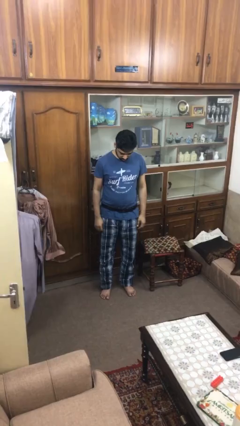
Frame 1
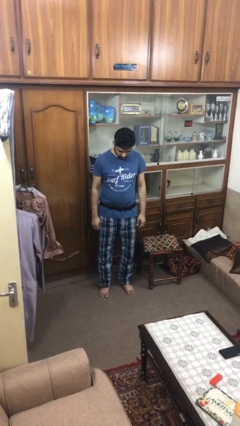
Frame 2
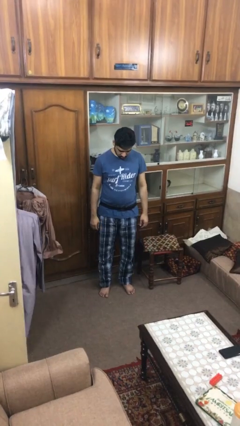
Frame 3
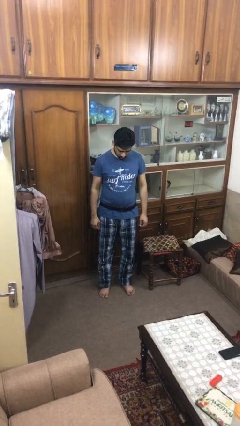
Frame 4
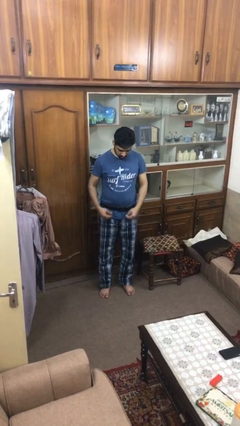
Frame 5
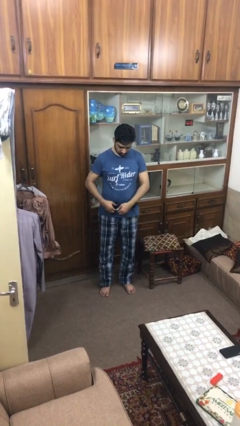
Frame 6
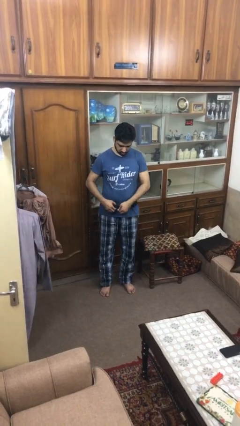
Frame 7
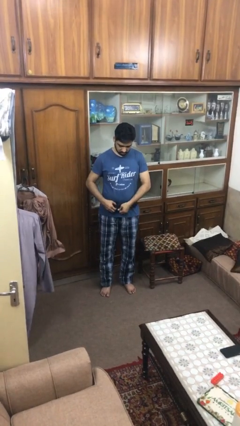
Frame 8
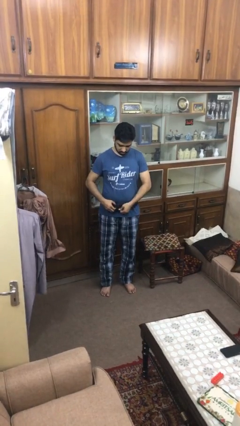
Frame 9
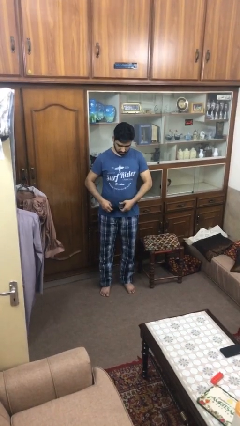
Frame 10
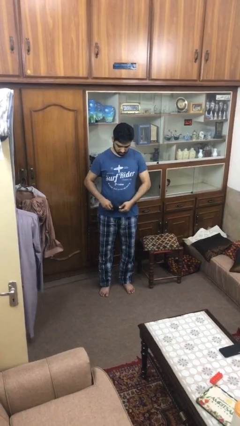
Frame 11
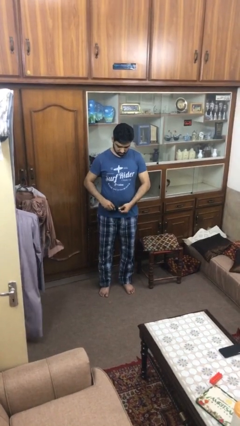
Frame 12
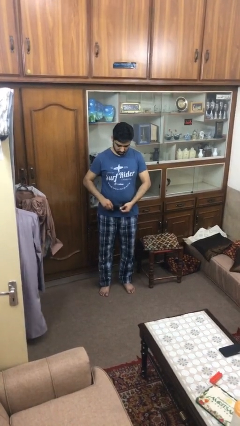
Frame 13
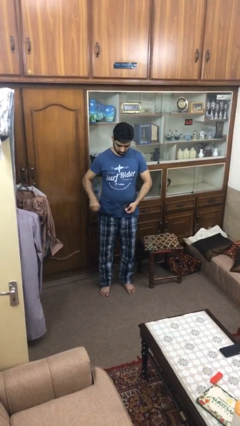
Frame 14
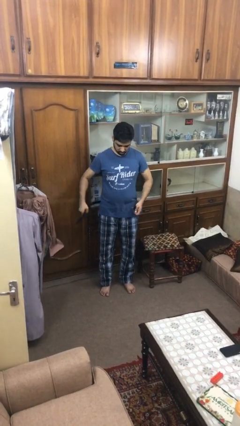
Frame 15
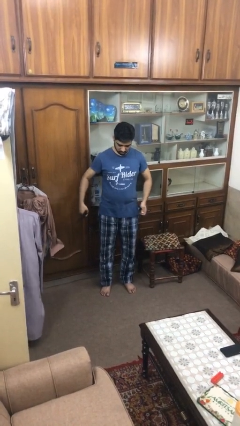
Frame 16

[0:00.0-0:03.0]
person takes off belt

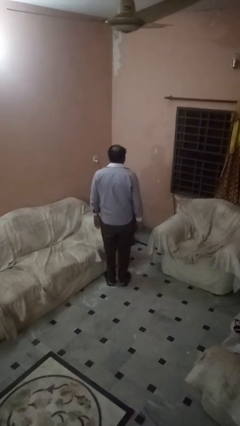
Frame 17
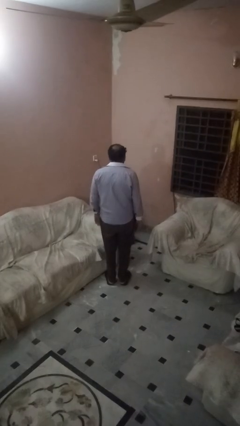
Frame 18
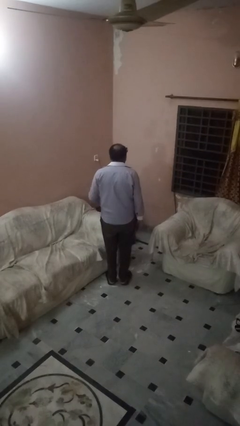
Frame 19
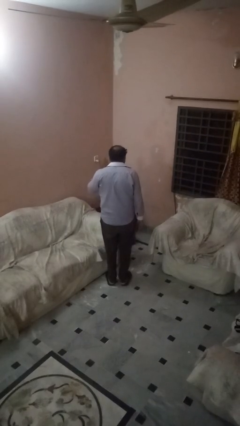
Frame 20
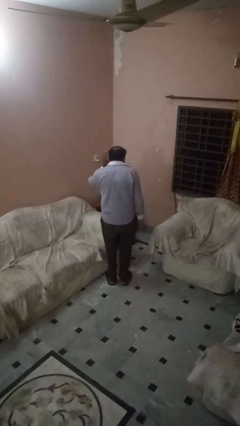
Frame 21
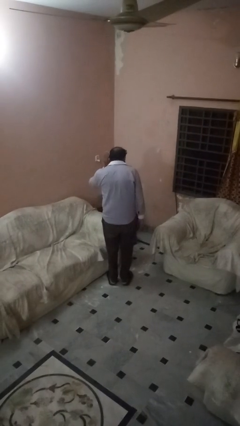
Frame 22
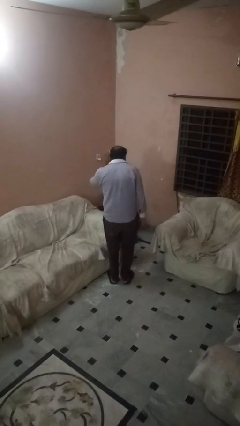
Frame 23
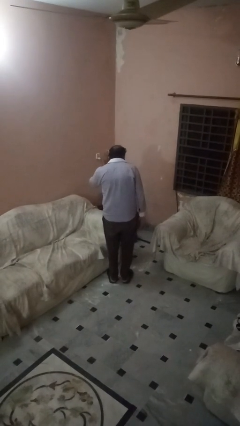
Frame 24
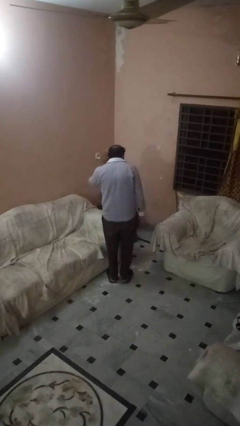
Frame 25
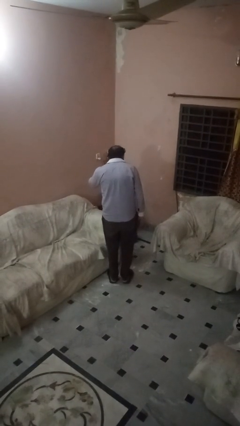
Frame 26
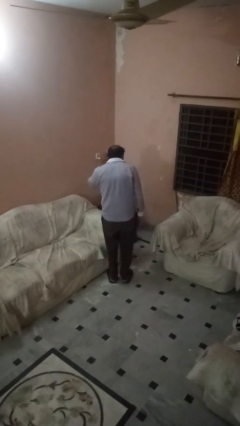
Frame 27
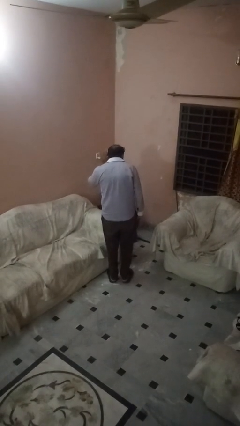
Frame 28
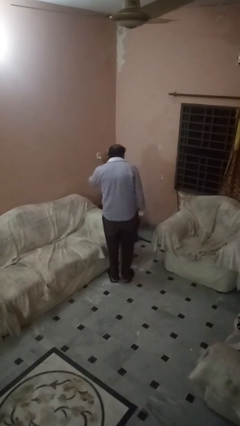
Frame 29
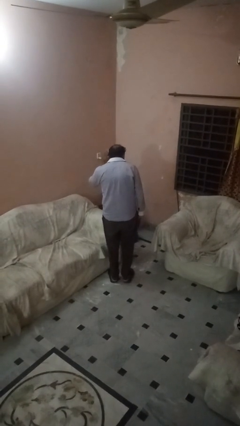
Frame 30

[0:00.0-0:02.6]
person gestures listen closely

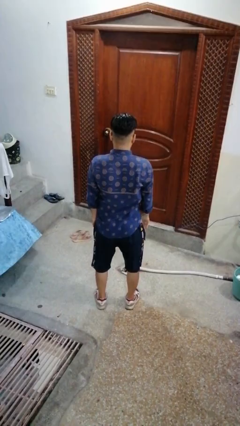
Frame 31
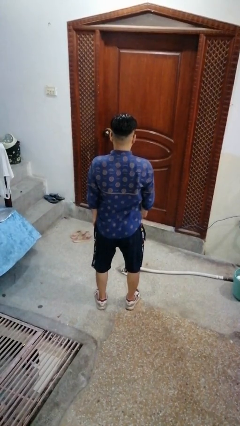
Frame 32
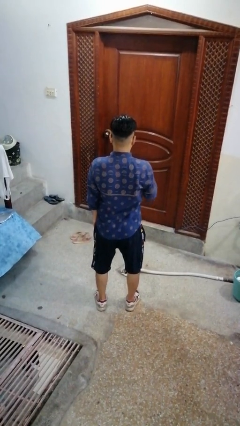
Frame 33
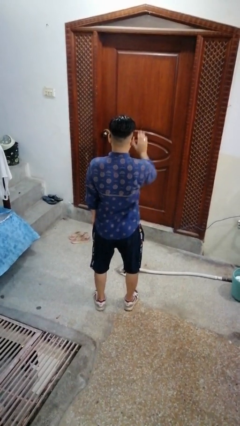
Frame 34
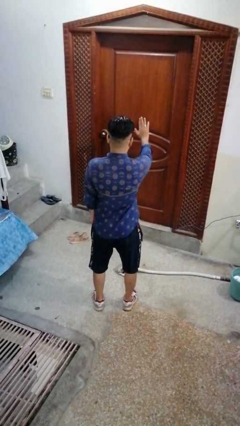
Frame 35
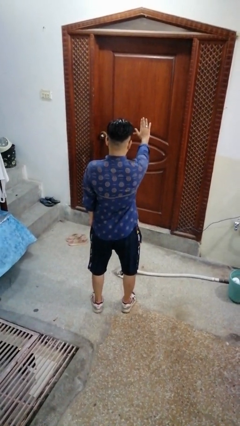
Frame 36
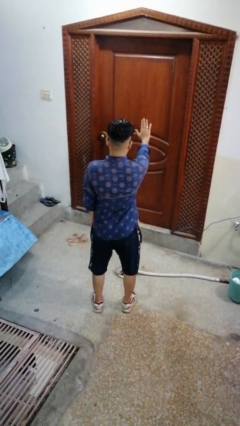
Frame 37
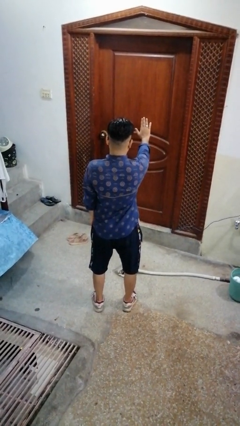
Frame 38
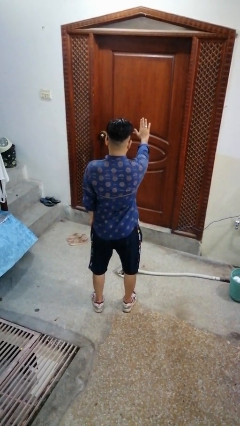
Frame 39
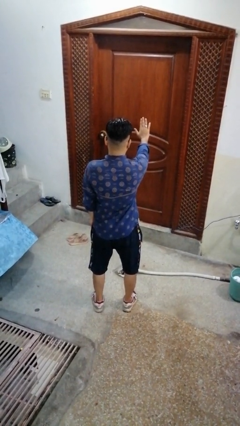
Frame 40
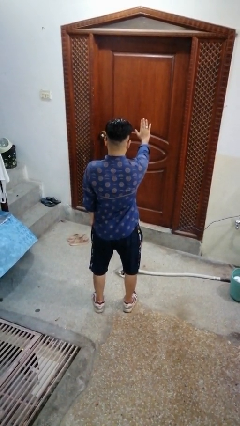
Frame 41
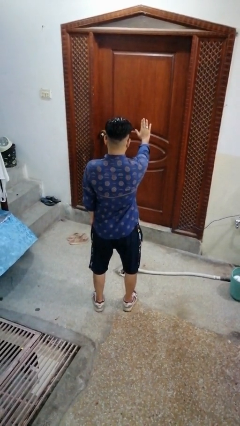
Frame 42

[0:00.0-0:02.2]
person gestures stop

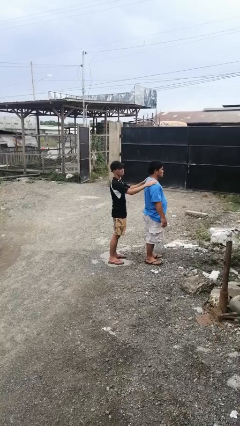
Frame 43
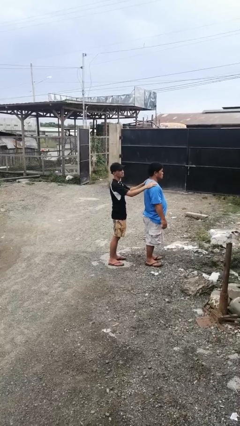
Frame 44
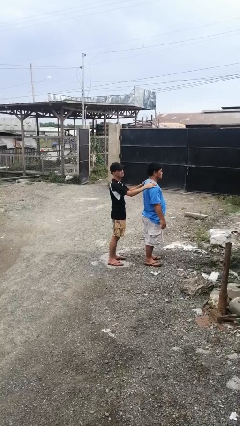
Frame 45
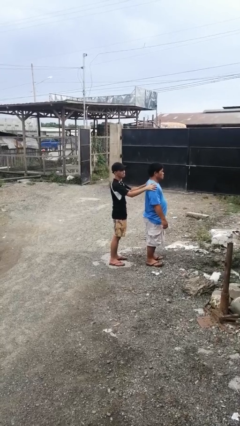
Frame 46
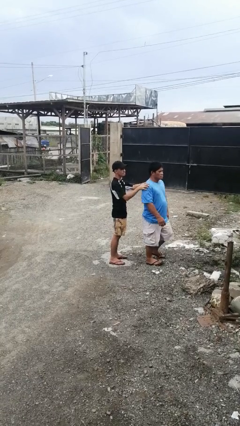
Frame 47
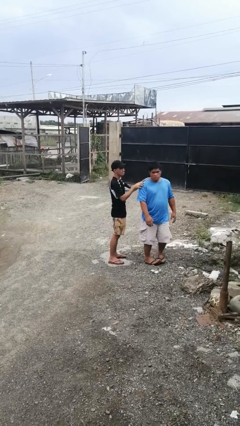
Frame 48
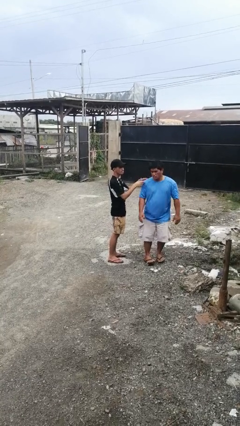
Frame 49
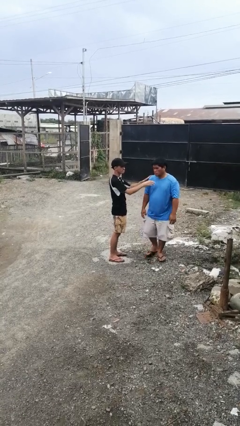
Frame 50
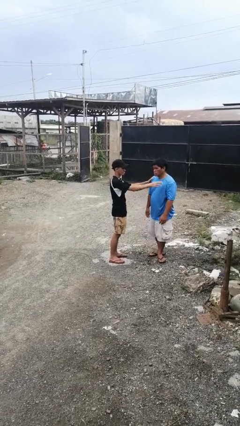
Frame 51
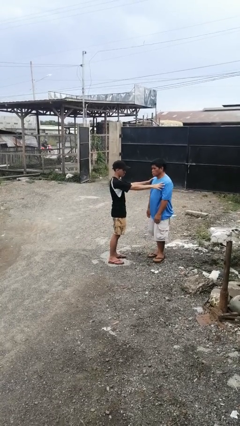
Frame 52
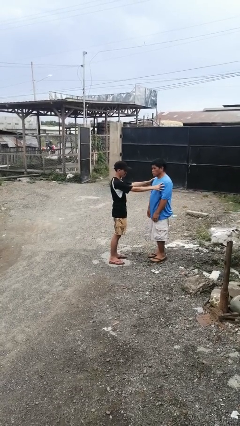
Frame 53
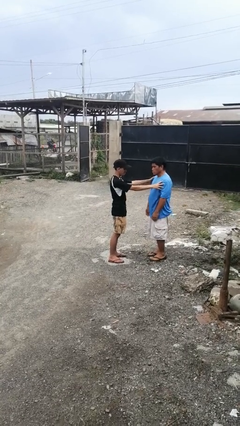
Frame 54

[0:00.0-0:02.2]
person spins person around

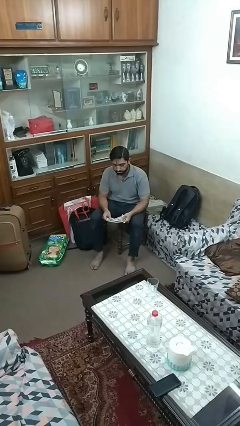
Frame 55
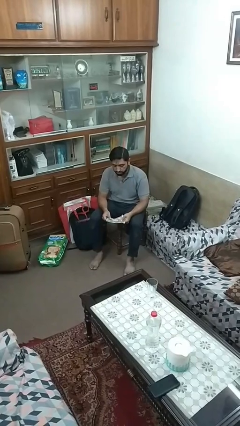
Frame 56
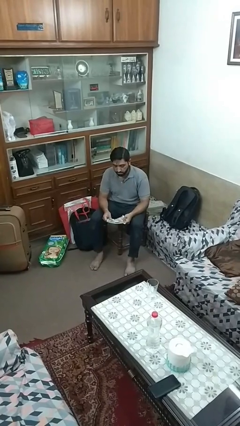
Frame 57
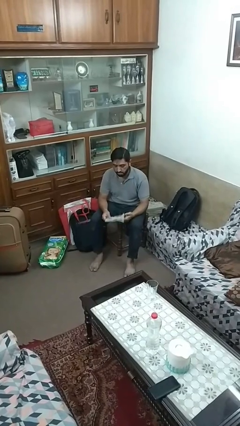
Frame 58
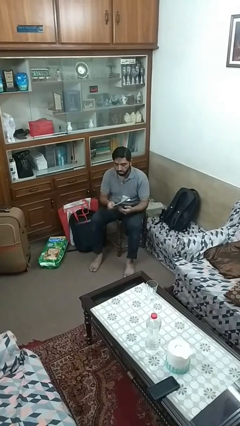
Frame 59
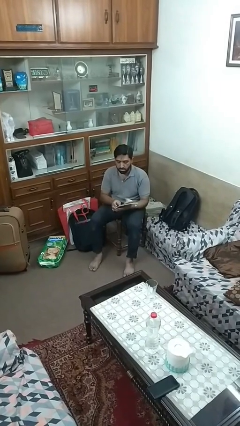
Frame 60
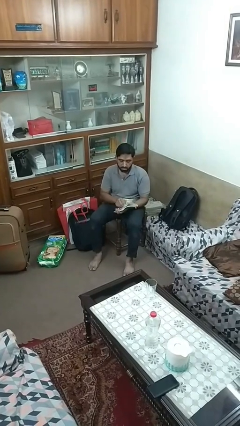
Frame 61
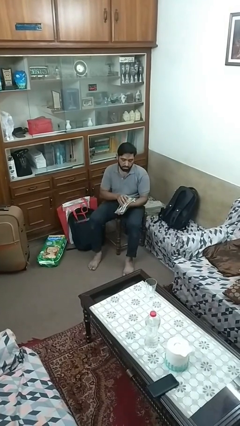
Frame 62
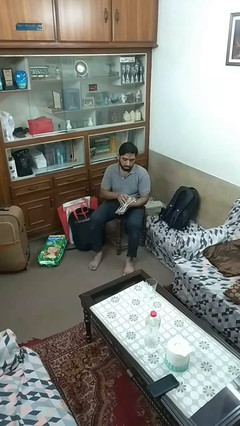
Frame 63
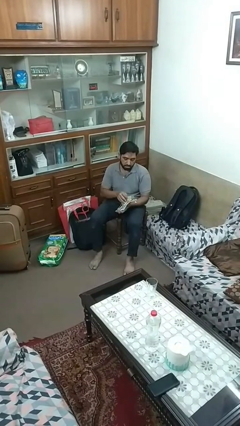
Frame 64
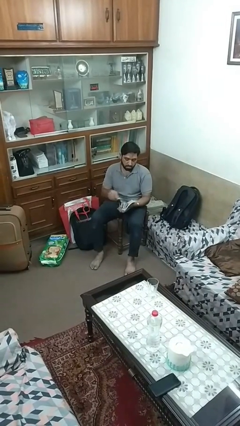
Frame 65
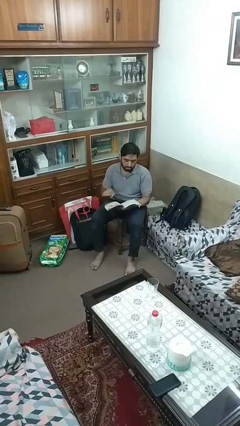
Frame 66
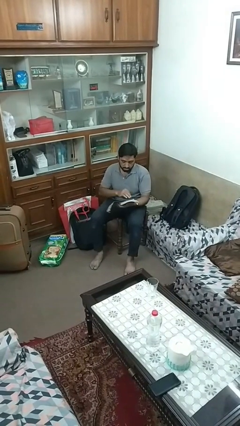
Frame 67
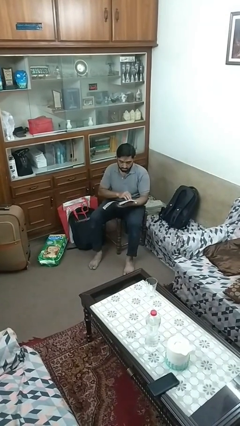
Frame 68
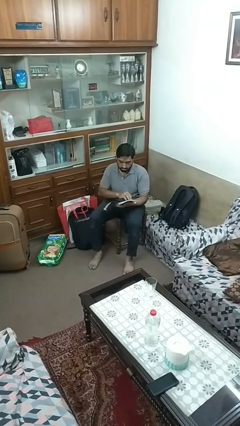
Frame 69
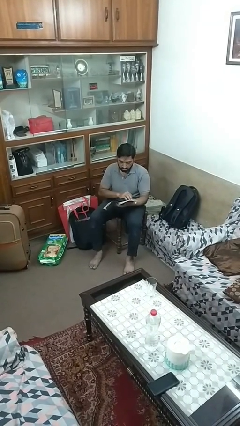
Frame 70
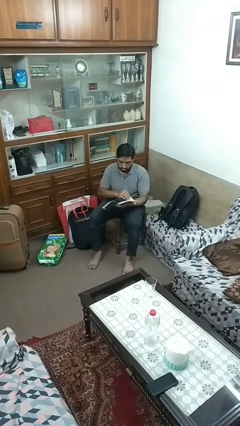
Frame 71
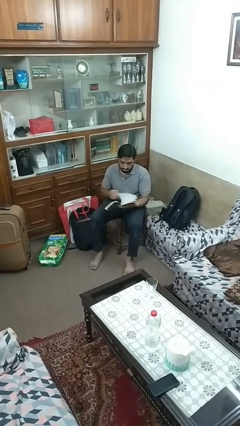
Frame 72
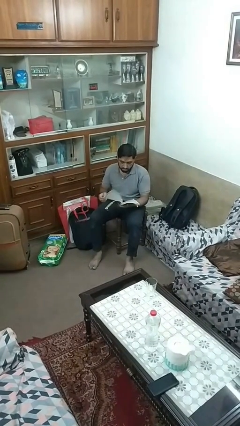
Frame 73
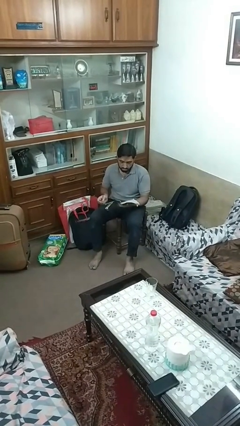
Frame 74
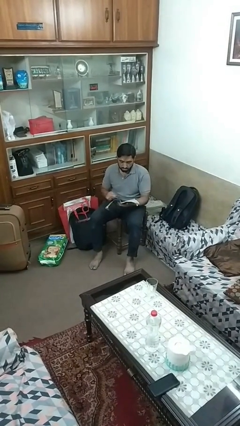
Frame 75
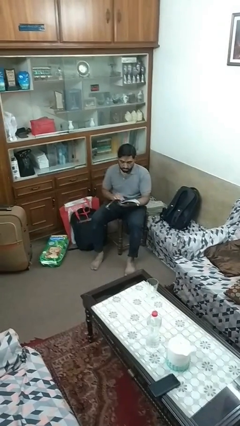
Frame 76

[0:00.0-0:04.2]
person reads magazine

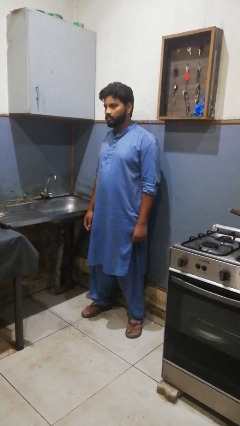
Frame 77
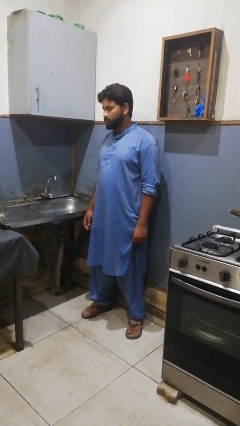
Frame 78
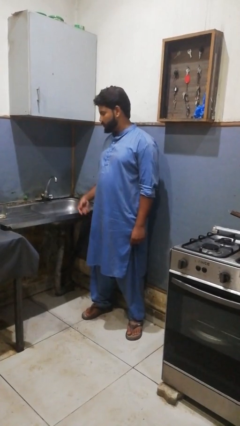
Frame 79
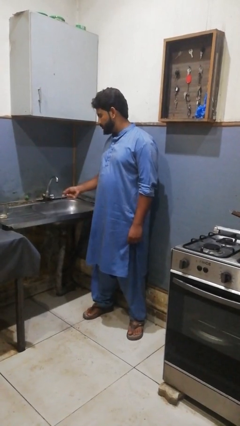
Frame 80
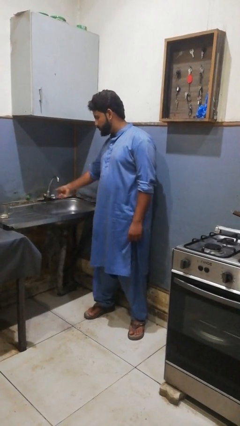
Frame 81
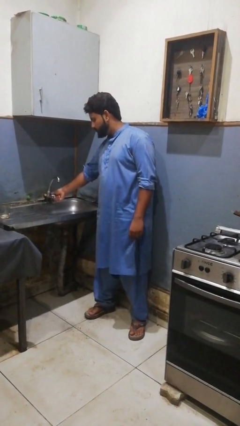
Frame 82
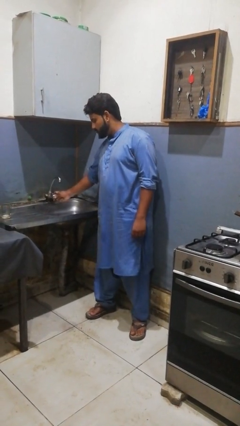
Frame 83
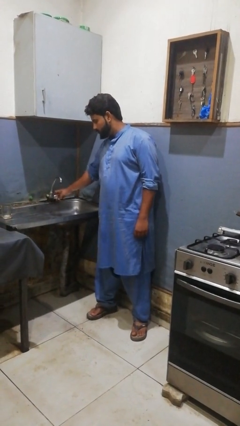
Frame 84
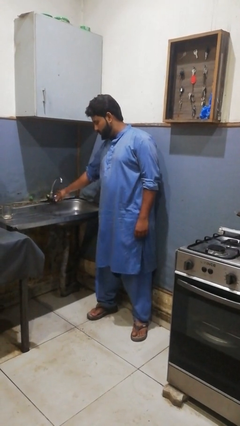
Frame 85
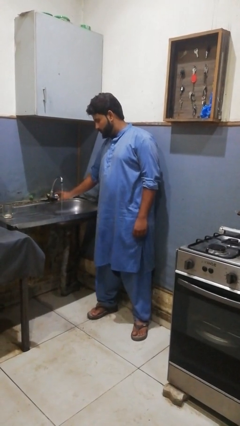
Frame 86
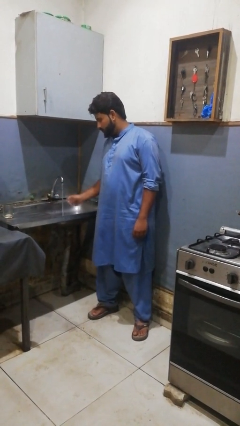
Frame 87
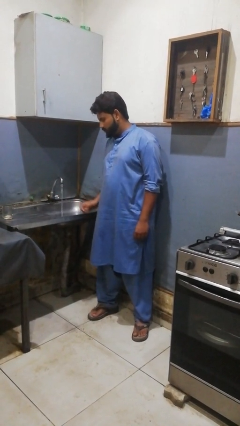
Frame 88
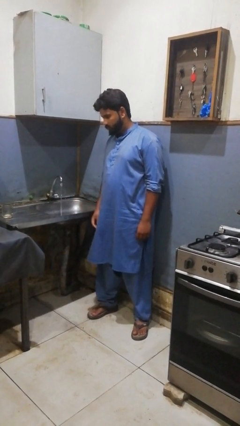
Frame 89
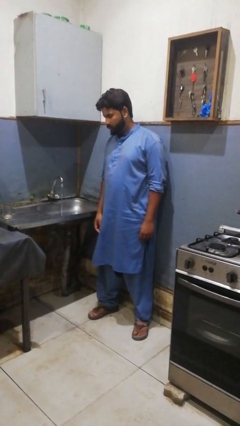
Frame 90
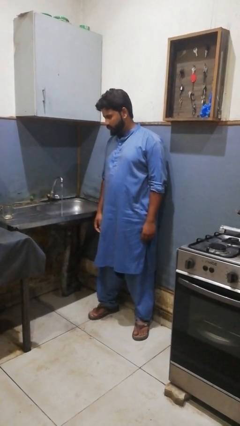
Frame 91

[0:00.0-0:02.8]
person turns on faucet

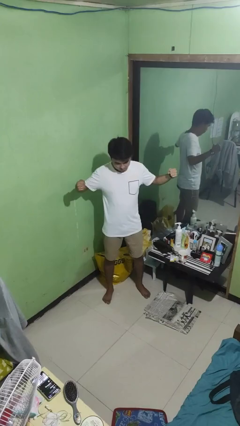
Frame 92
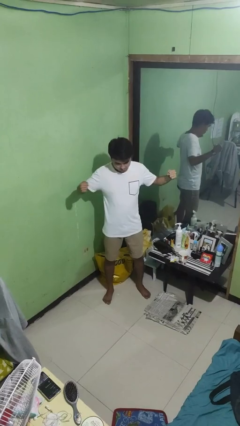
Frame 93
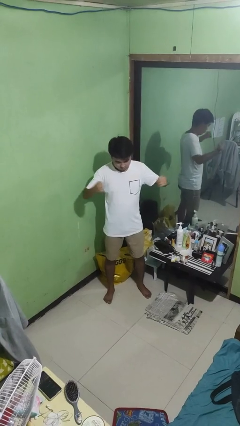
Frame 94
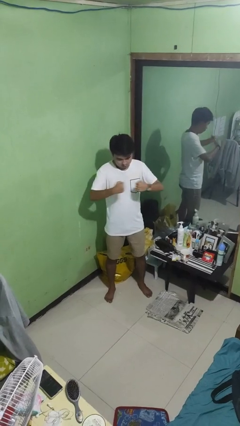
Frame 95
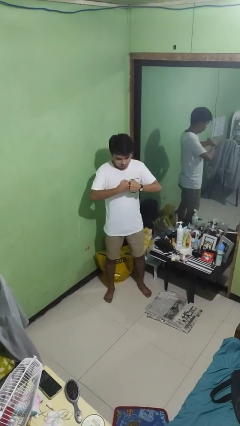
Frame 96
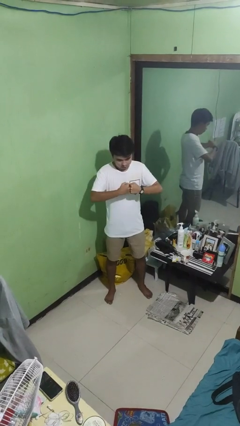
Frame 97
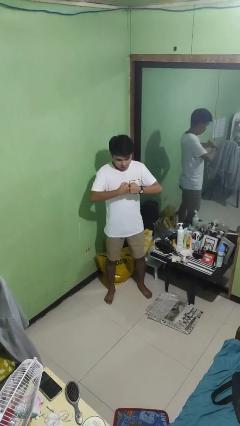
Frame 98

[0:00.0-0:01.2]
person gestures zoom out
